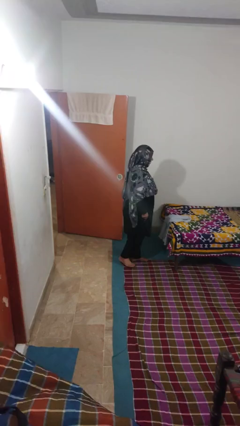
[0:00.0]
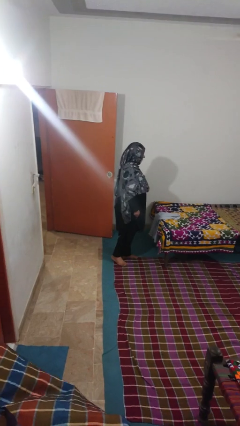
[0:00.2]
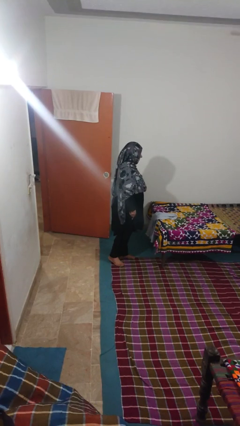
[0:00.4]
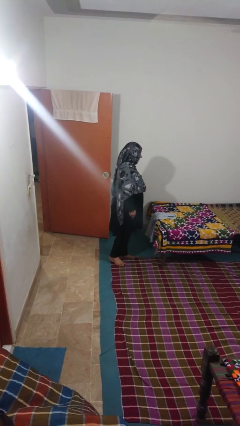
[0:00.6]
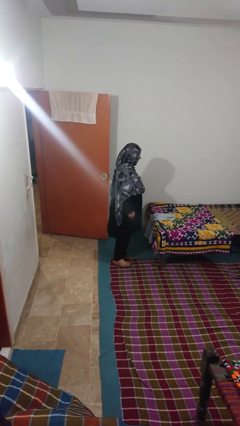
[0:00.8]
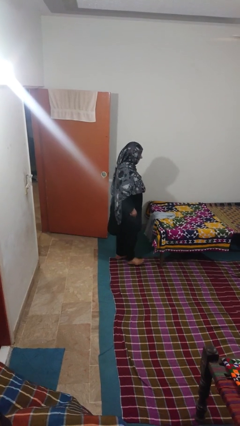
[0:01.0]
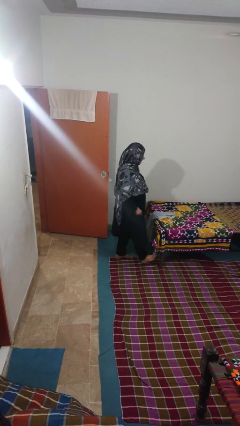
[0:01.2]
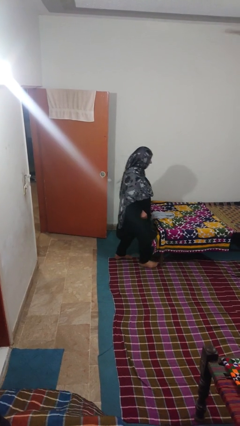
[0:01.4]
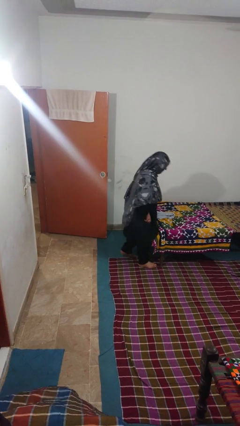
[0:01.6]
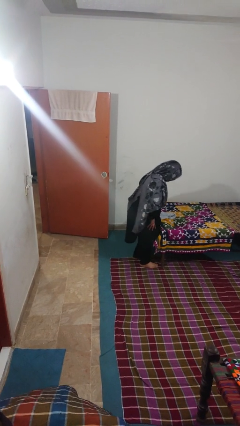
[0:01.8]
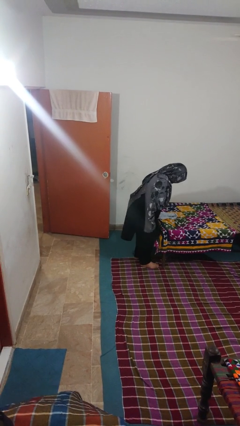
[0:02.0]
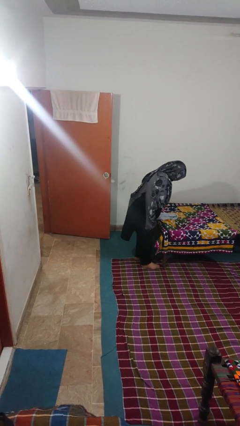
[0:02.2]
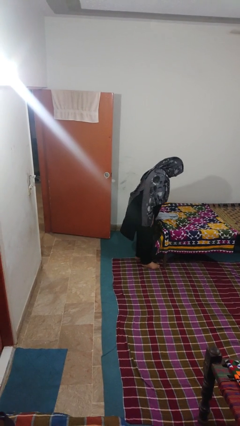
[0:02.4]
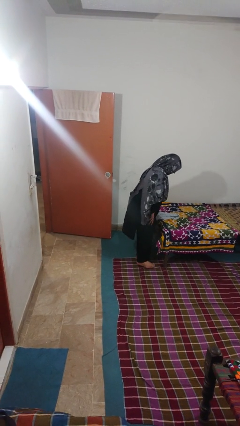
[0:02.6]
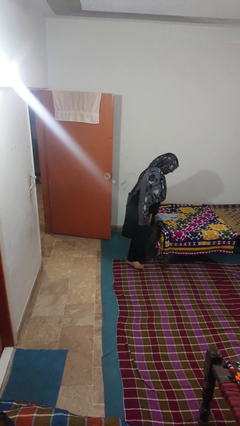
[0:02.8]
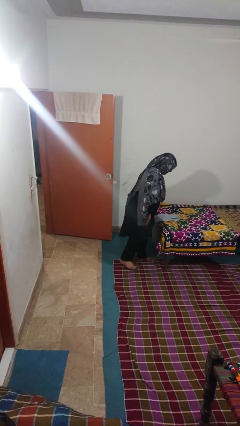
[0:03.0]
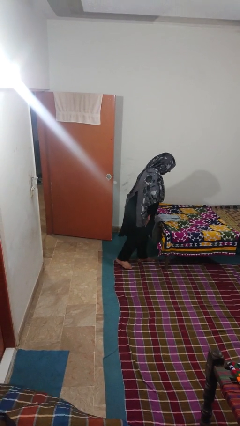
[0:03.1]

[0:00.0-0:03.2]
person stubs toe

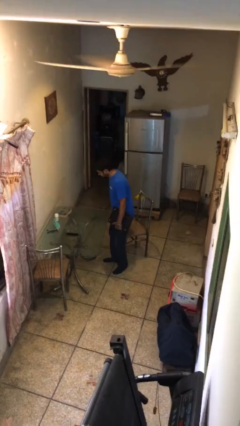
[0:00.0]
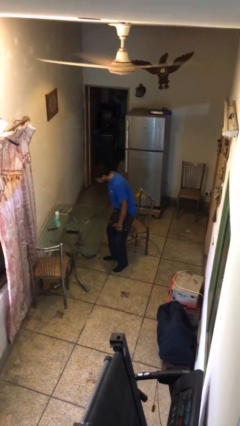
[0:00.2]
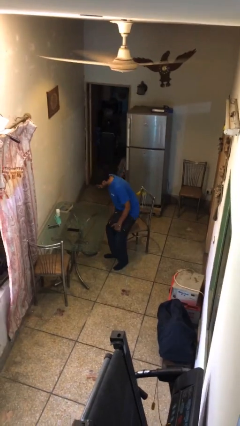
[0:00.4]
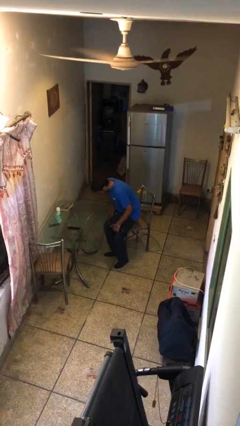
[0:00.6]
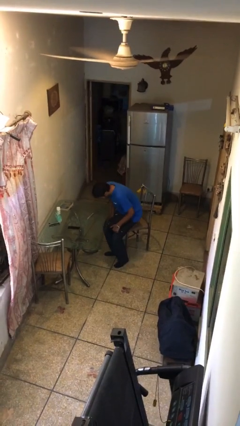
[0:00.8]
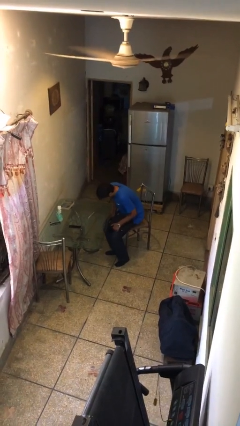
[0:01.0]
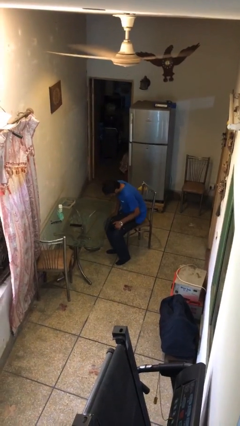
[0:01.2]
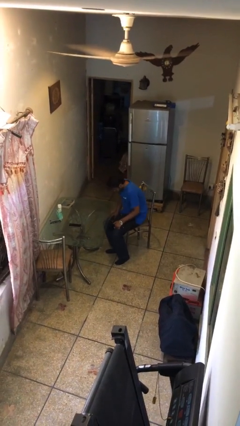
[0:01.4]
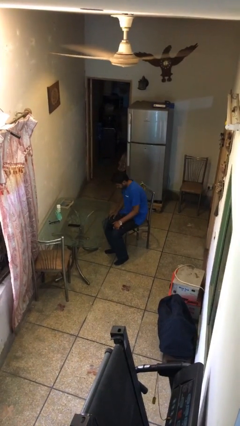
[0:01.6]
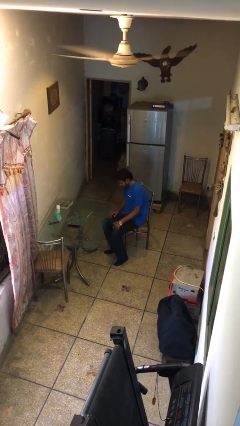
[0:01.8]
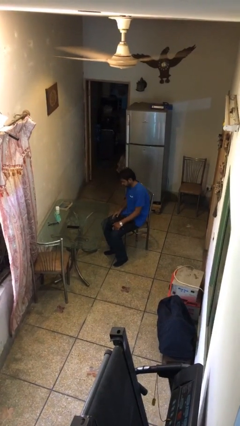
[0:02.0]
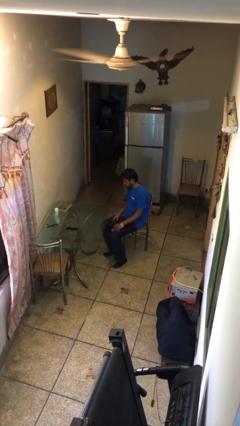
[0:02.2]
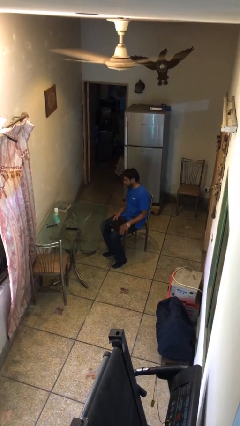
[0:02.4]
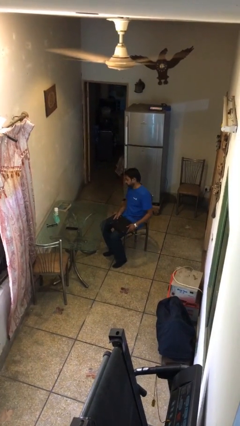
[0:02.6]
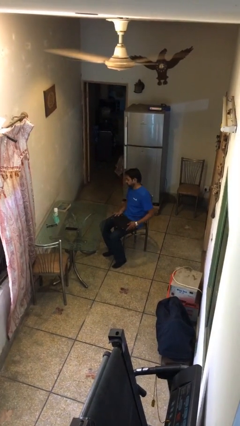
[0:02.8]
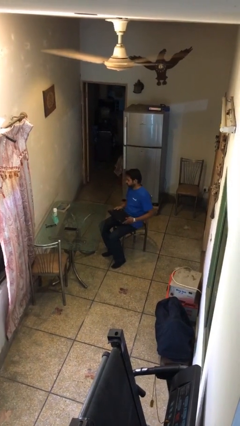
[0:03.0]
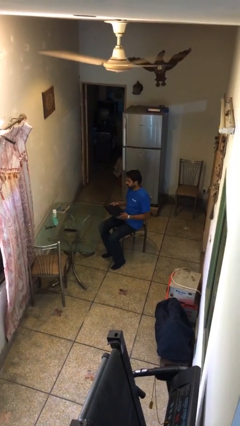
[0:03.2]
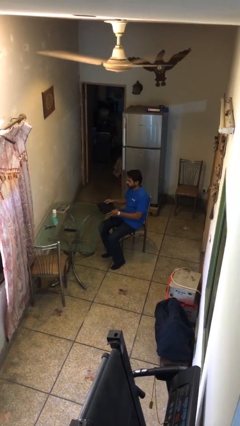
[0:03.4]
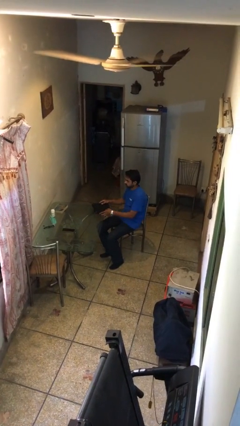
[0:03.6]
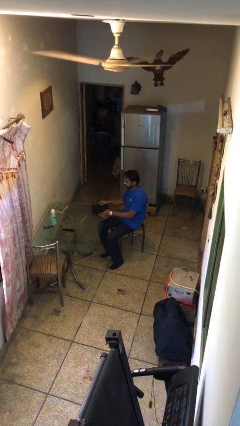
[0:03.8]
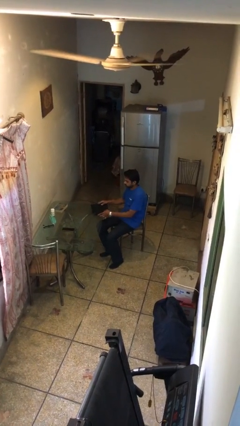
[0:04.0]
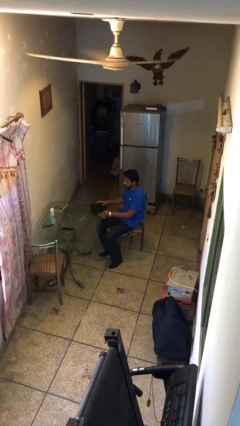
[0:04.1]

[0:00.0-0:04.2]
person sits down

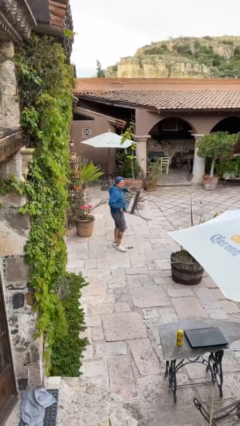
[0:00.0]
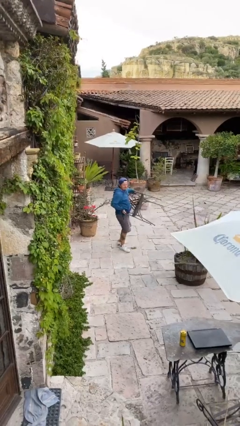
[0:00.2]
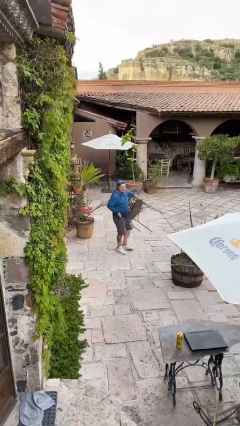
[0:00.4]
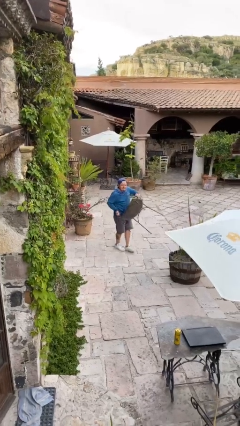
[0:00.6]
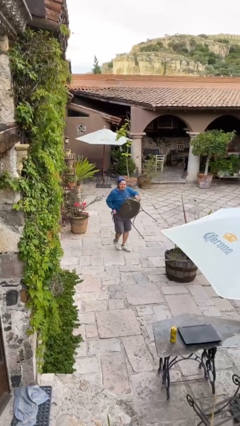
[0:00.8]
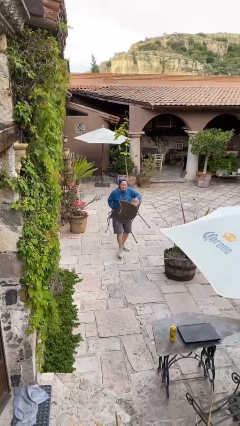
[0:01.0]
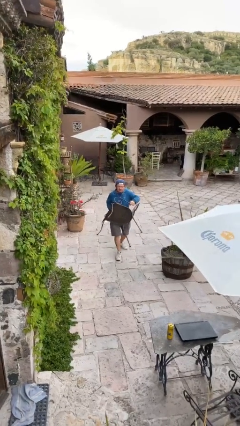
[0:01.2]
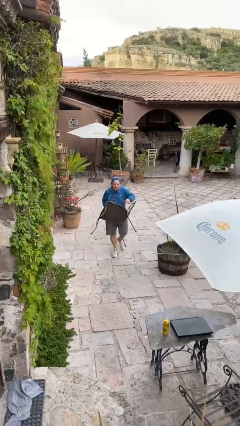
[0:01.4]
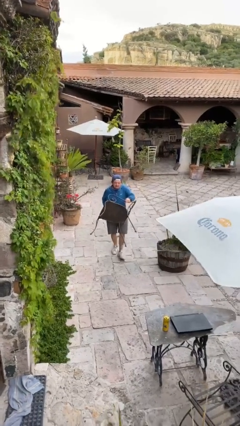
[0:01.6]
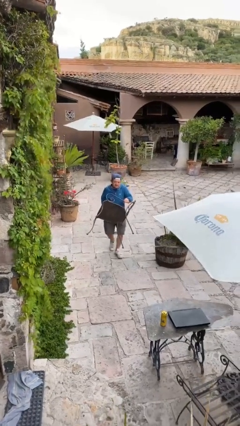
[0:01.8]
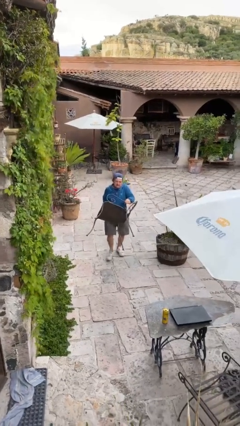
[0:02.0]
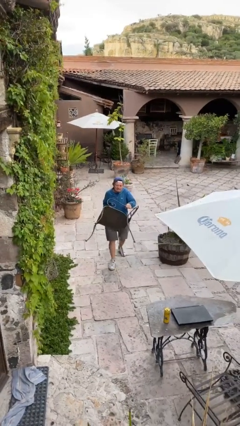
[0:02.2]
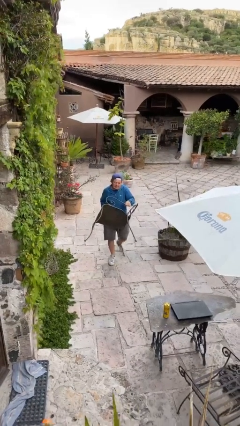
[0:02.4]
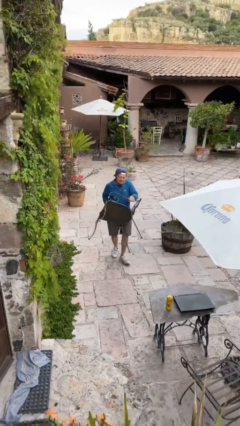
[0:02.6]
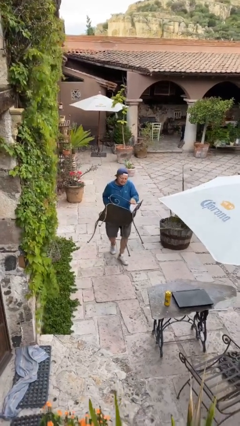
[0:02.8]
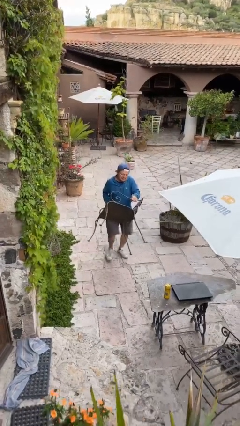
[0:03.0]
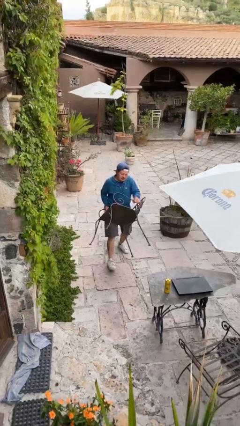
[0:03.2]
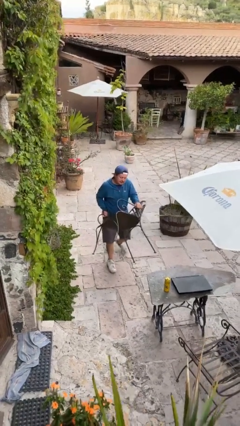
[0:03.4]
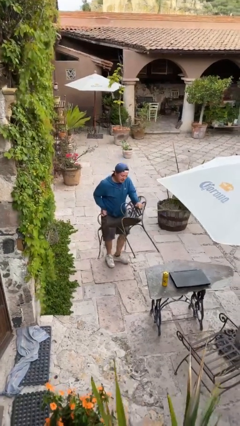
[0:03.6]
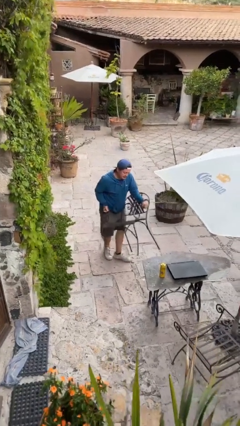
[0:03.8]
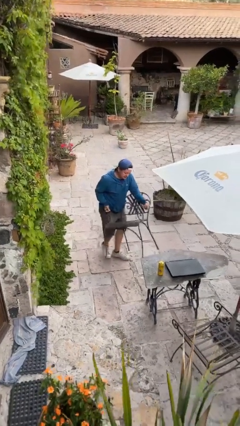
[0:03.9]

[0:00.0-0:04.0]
person carries heavy object

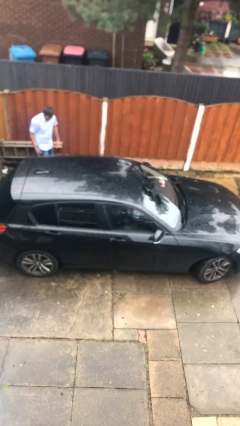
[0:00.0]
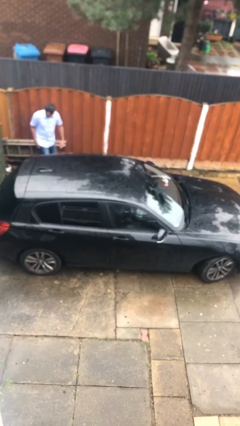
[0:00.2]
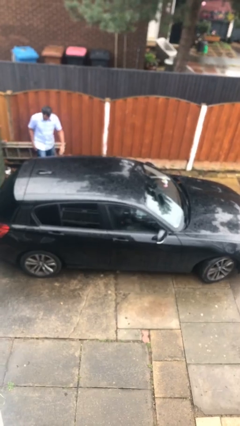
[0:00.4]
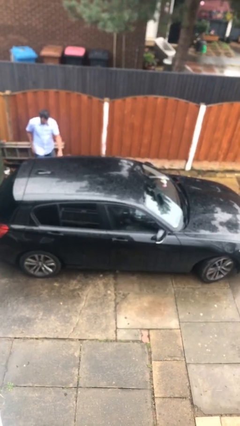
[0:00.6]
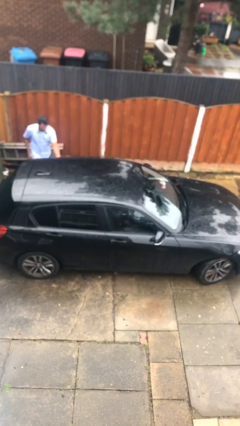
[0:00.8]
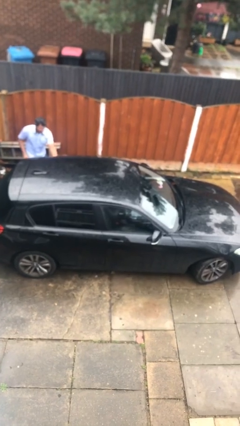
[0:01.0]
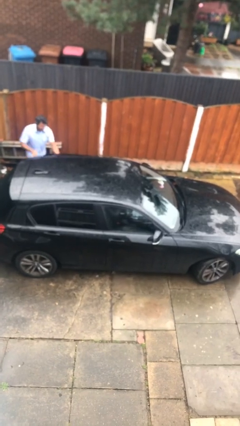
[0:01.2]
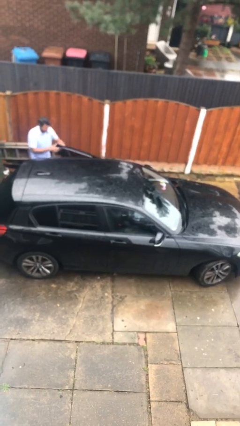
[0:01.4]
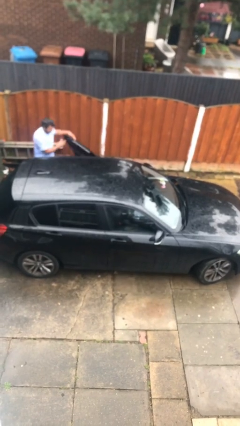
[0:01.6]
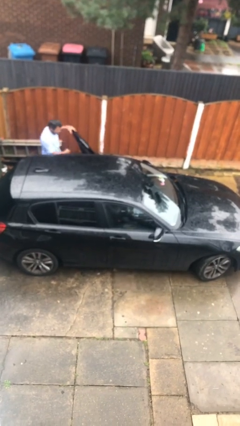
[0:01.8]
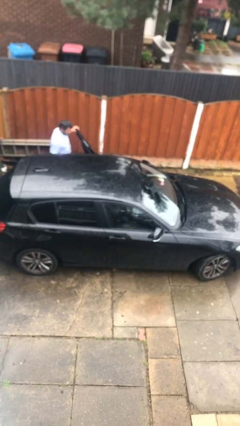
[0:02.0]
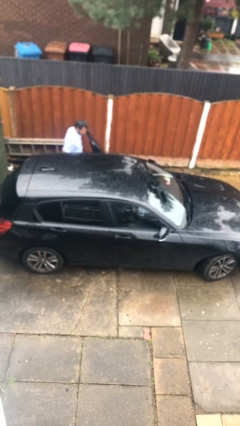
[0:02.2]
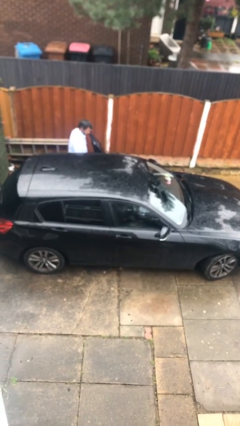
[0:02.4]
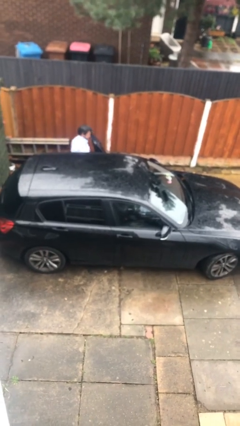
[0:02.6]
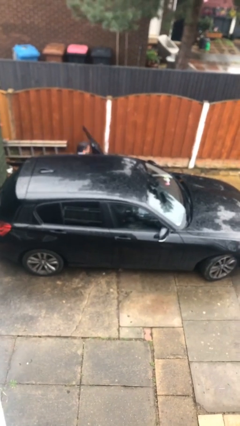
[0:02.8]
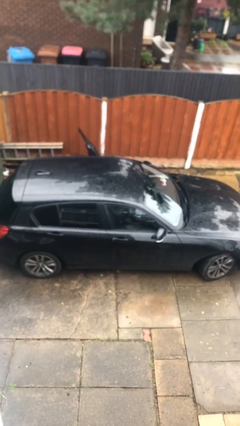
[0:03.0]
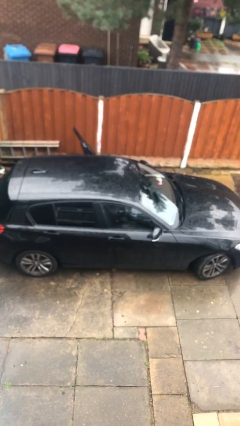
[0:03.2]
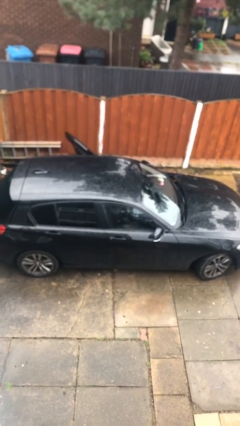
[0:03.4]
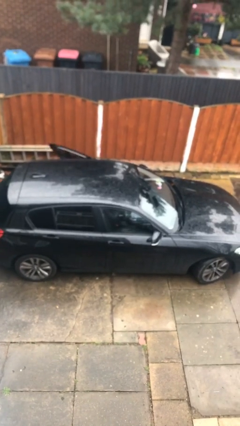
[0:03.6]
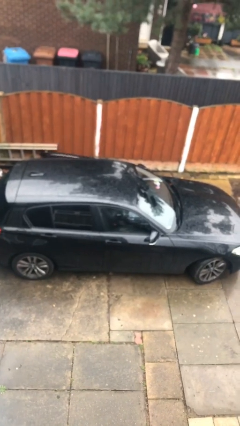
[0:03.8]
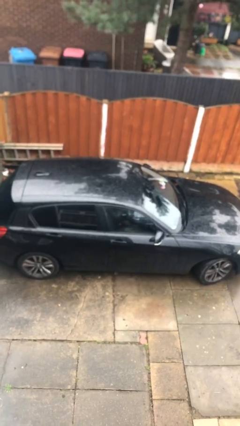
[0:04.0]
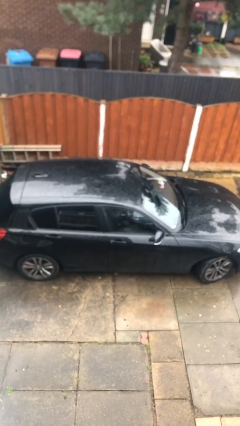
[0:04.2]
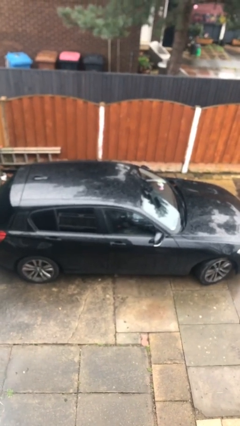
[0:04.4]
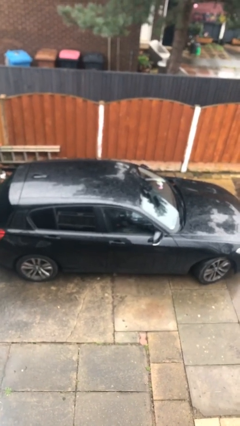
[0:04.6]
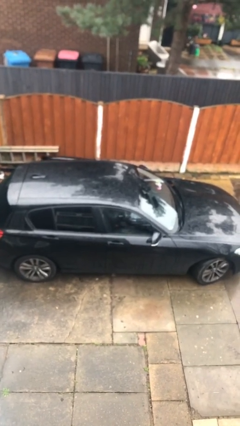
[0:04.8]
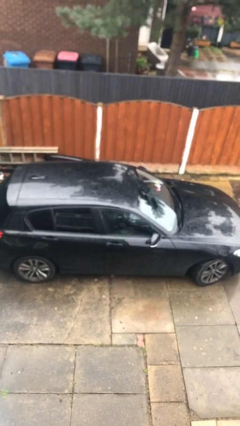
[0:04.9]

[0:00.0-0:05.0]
car picks up person

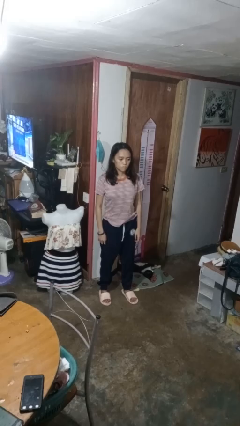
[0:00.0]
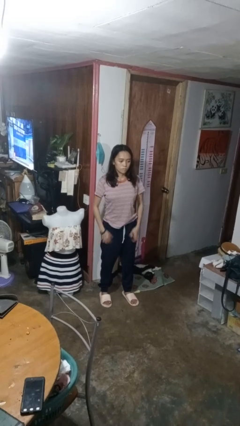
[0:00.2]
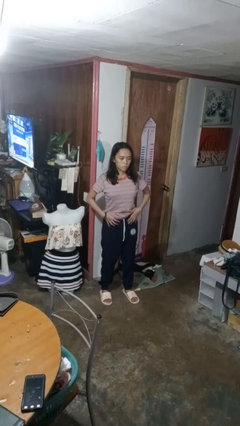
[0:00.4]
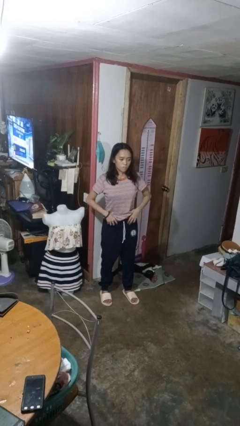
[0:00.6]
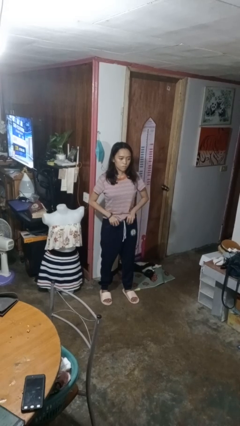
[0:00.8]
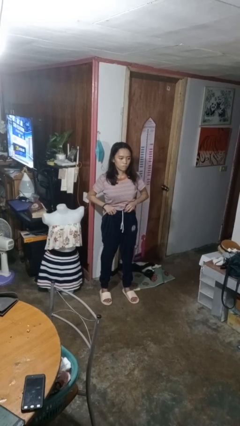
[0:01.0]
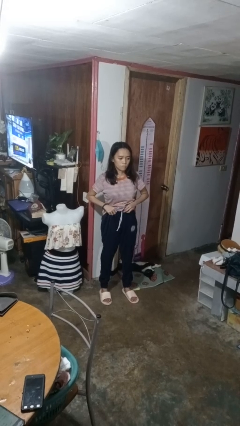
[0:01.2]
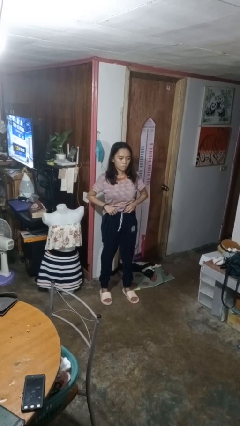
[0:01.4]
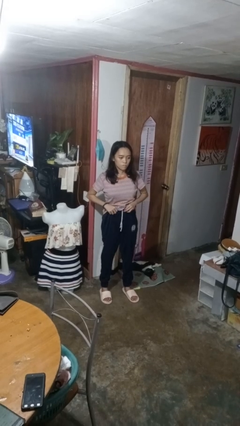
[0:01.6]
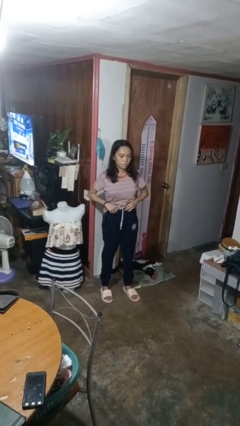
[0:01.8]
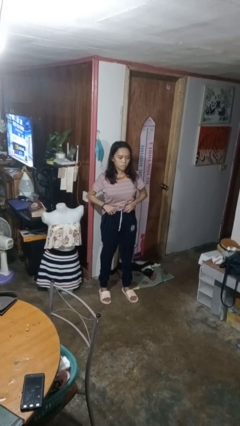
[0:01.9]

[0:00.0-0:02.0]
person hikes up pants
